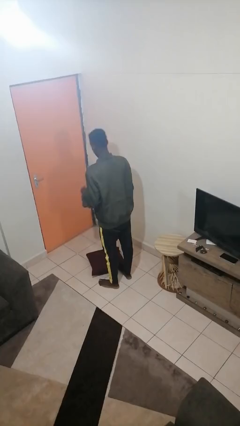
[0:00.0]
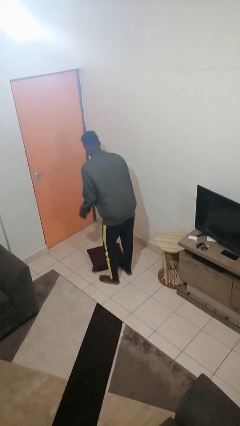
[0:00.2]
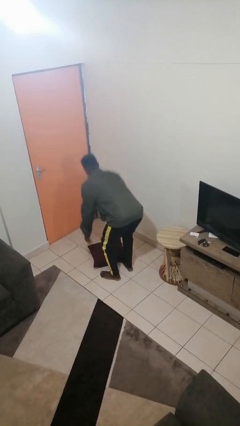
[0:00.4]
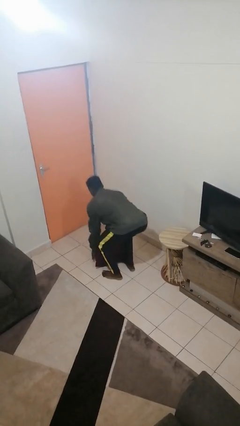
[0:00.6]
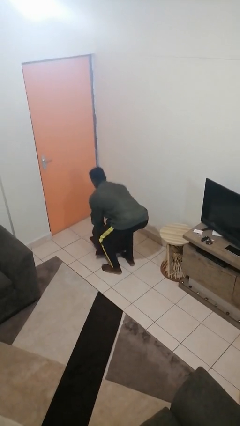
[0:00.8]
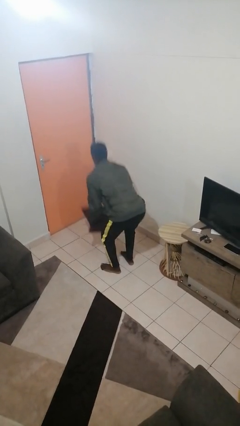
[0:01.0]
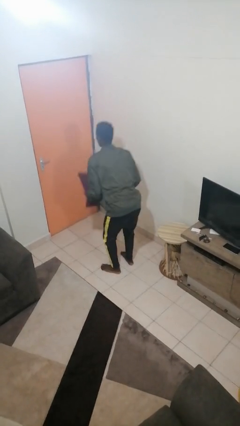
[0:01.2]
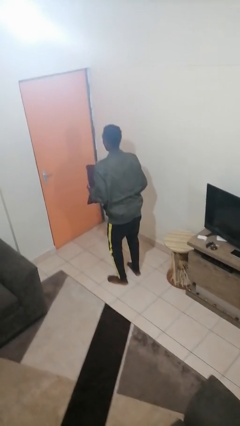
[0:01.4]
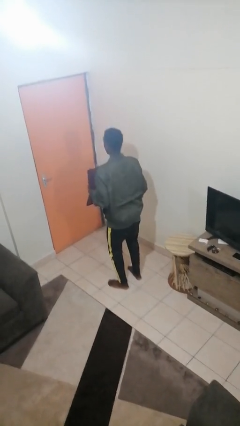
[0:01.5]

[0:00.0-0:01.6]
person picks up object from floor

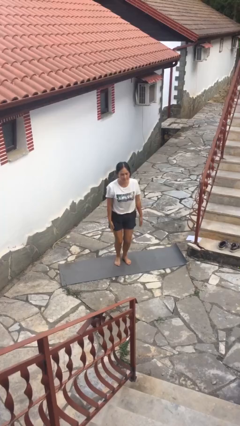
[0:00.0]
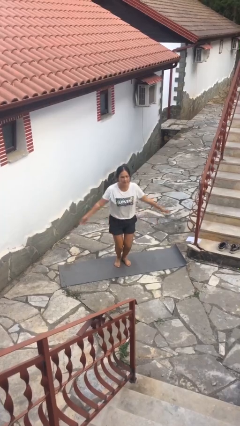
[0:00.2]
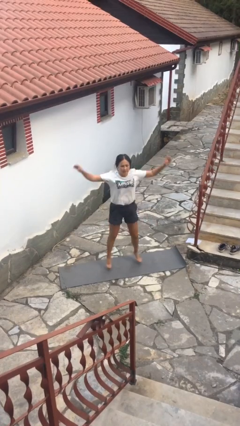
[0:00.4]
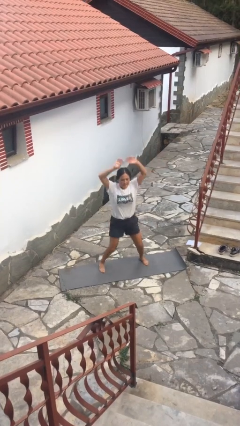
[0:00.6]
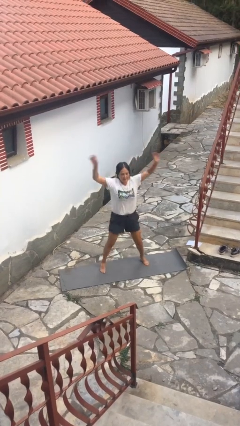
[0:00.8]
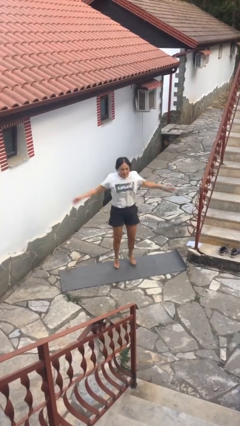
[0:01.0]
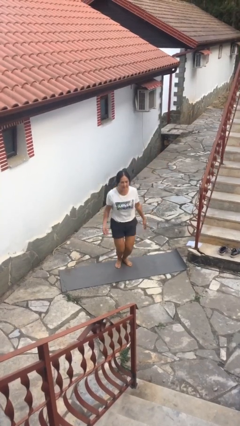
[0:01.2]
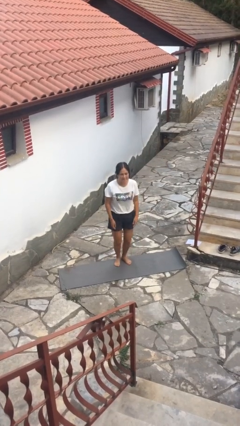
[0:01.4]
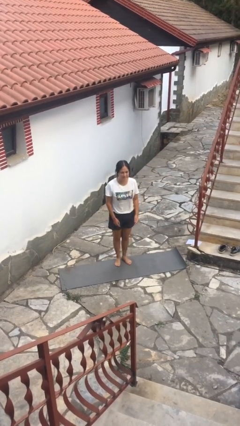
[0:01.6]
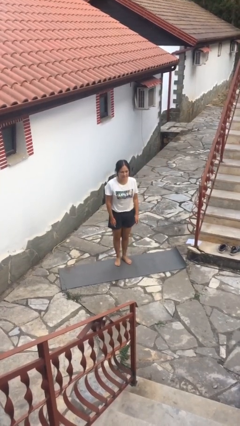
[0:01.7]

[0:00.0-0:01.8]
person exercises with jumping jacks

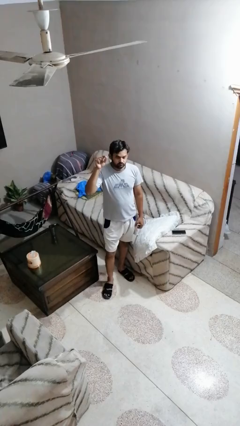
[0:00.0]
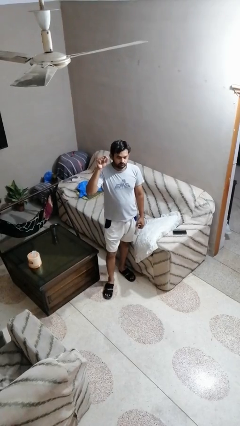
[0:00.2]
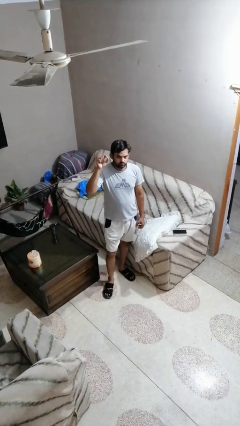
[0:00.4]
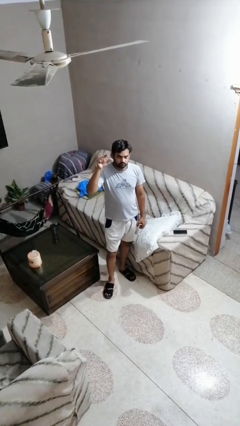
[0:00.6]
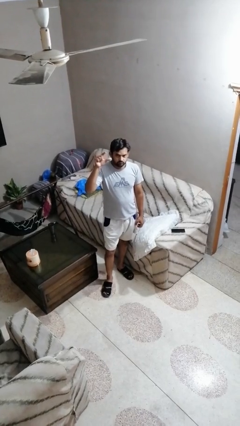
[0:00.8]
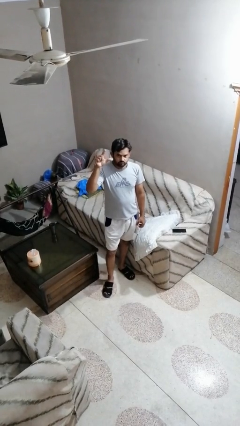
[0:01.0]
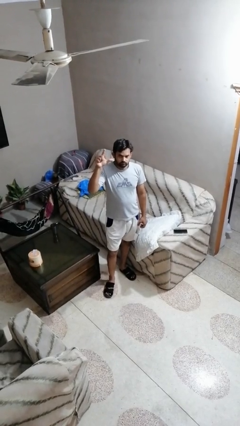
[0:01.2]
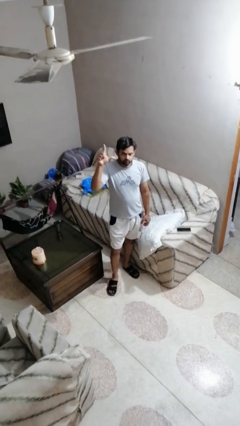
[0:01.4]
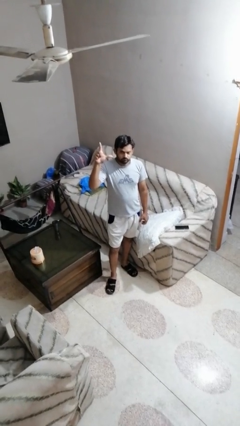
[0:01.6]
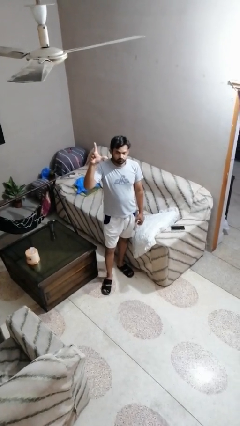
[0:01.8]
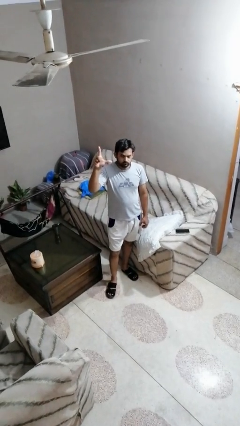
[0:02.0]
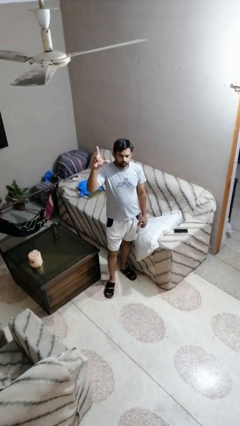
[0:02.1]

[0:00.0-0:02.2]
person gestures zoom out

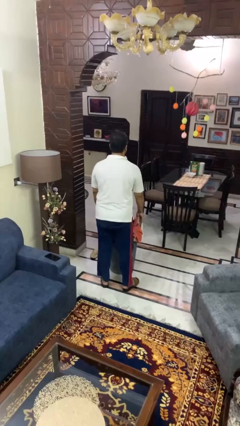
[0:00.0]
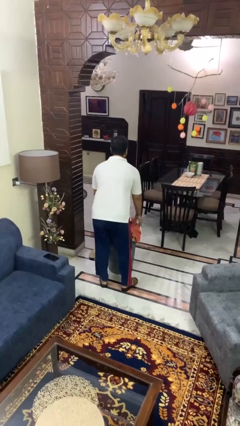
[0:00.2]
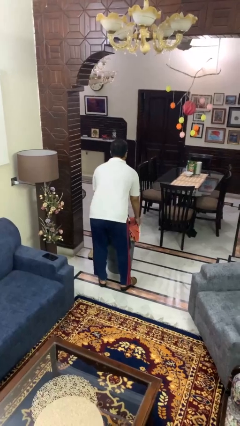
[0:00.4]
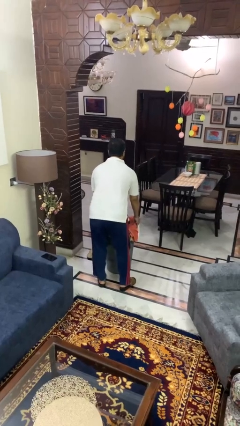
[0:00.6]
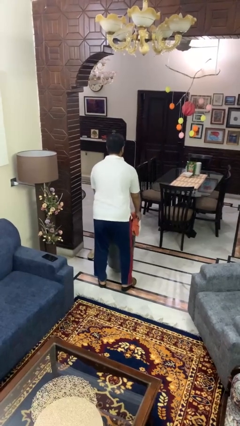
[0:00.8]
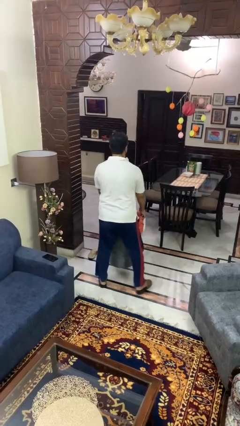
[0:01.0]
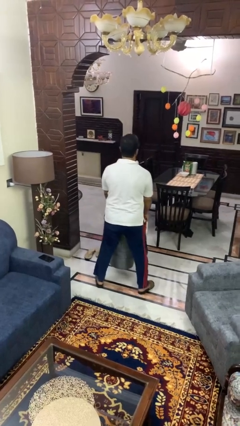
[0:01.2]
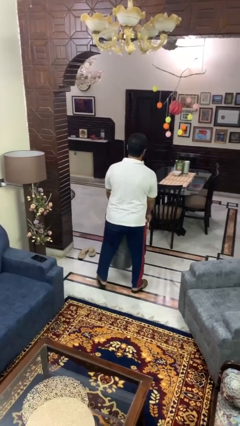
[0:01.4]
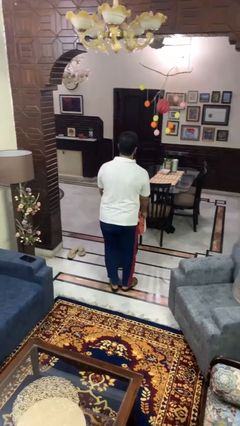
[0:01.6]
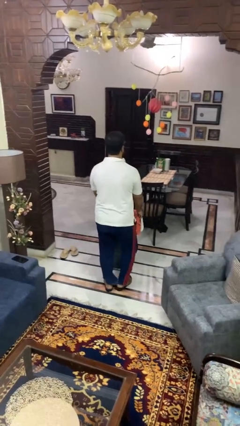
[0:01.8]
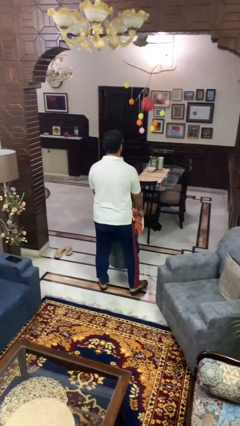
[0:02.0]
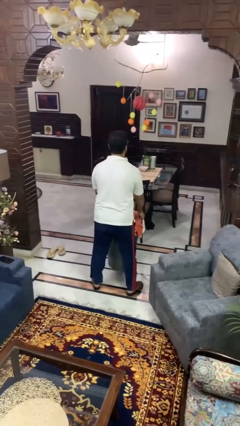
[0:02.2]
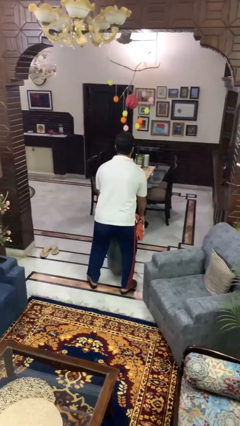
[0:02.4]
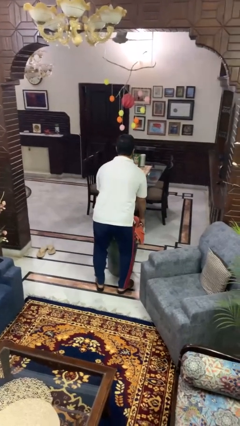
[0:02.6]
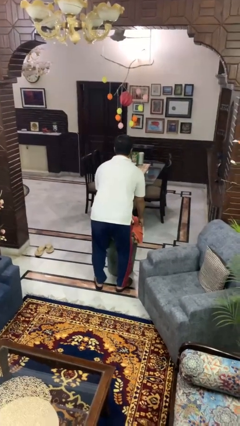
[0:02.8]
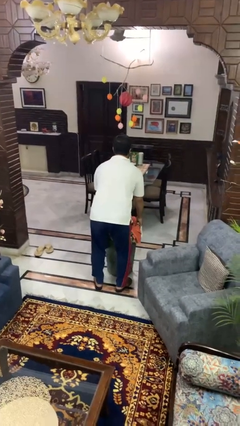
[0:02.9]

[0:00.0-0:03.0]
person carries laundry basket

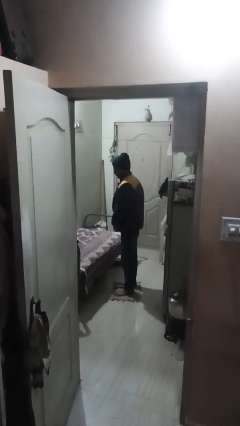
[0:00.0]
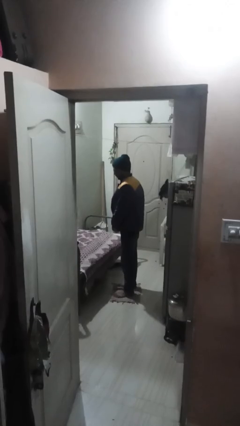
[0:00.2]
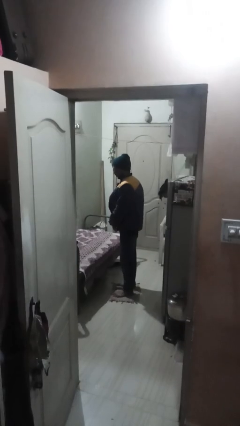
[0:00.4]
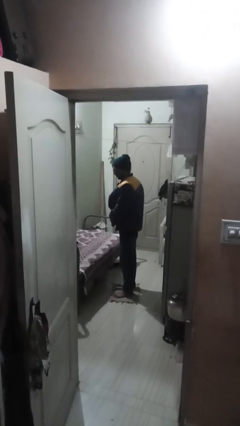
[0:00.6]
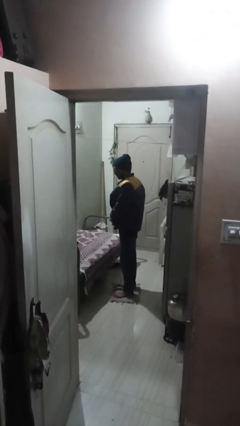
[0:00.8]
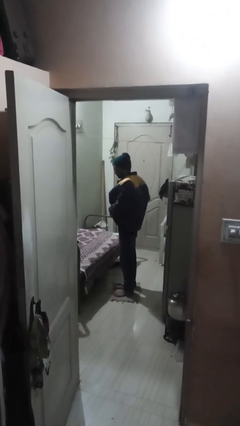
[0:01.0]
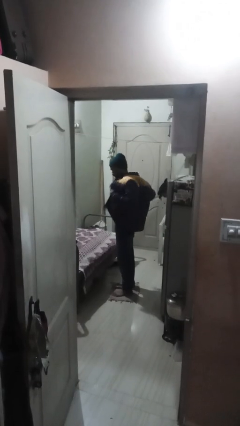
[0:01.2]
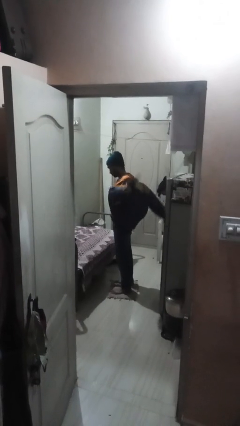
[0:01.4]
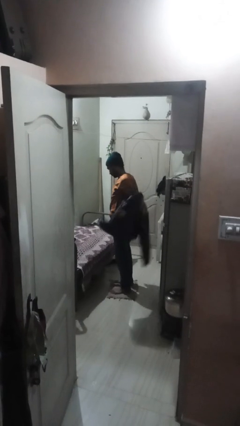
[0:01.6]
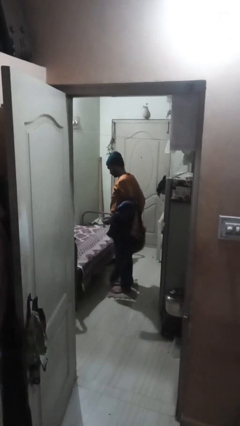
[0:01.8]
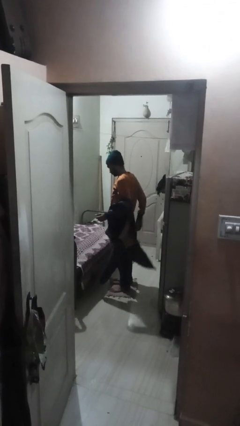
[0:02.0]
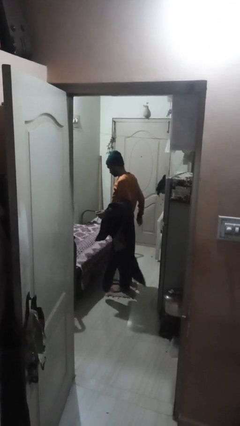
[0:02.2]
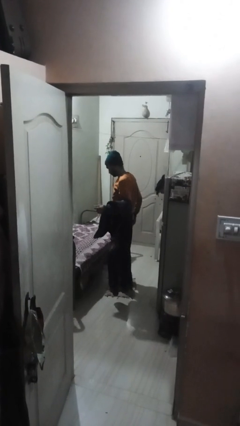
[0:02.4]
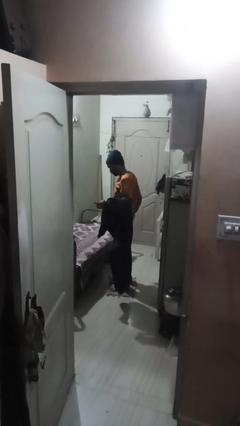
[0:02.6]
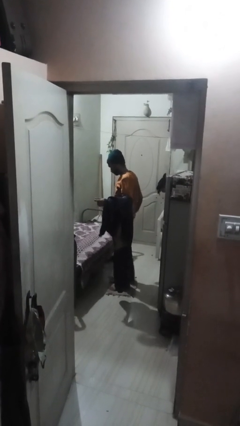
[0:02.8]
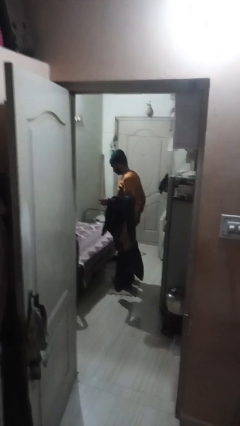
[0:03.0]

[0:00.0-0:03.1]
person takes off jacket

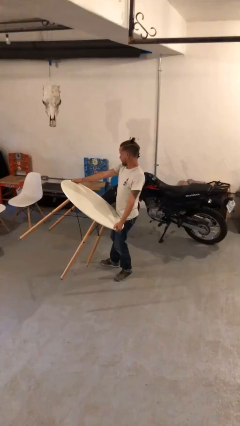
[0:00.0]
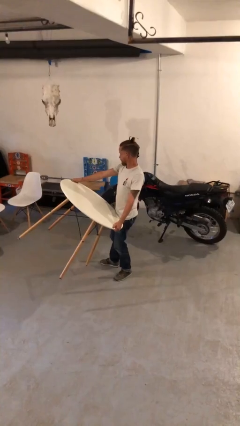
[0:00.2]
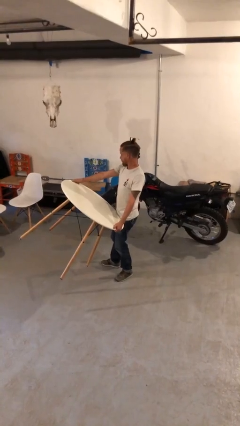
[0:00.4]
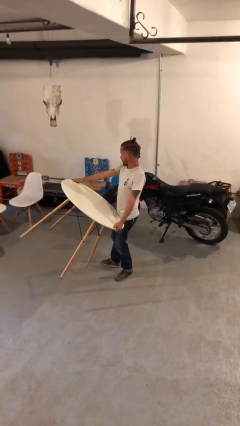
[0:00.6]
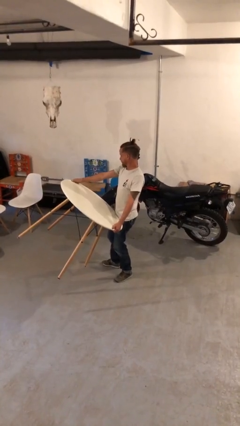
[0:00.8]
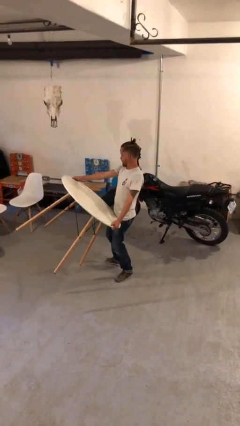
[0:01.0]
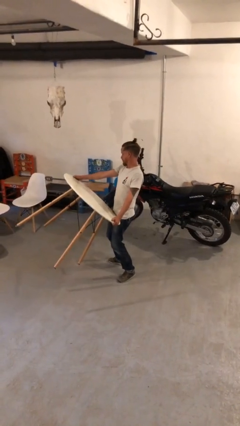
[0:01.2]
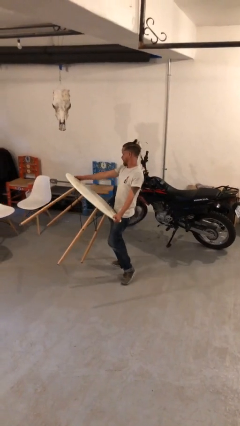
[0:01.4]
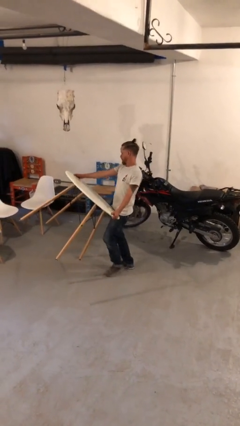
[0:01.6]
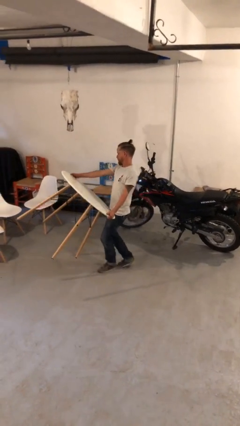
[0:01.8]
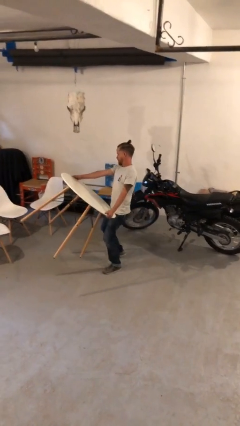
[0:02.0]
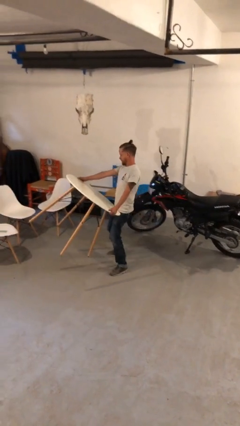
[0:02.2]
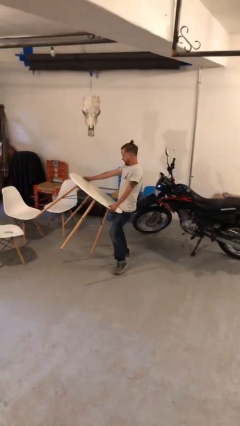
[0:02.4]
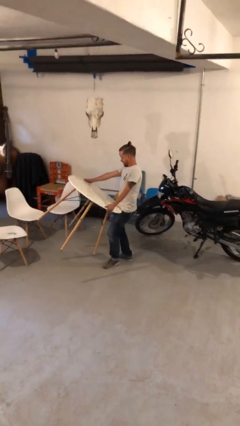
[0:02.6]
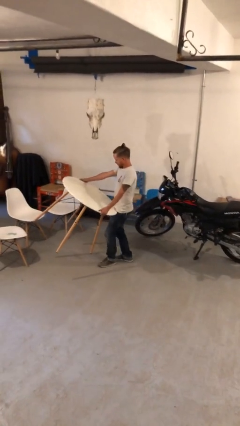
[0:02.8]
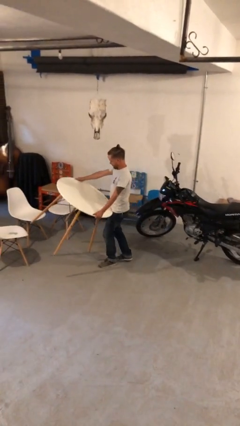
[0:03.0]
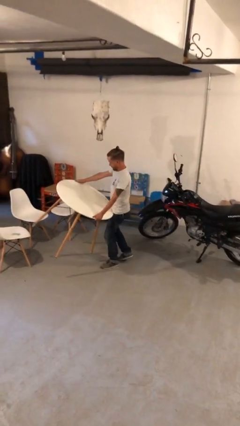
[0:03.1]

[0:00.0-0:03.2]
person carries heavy object

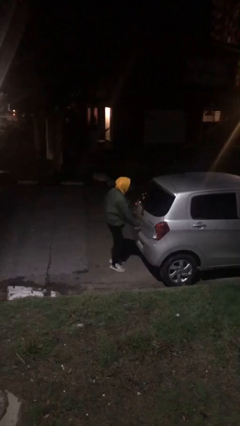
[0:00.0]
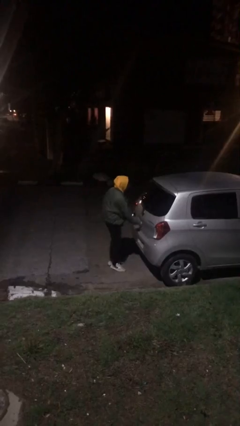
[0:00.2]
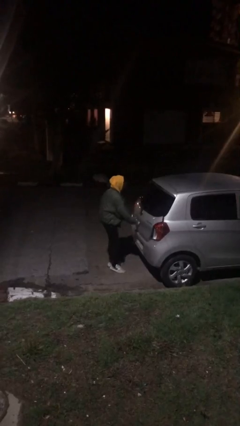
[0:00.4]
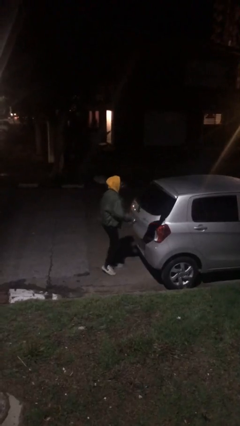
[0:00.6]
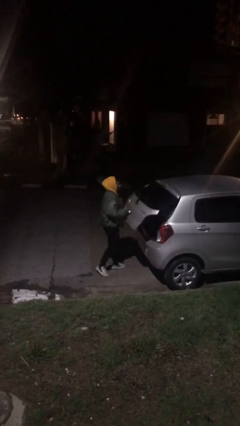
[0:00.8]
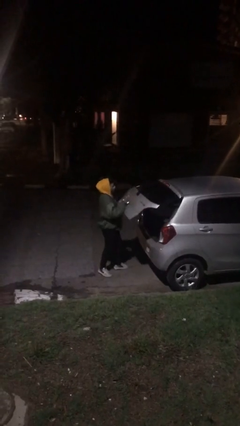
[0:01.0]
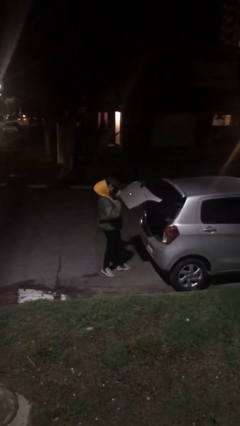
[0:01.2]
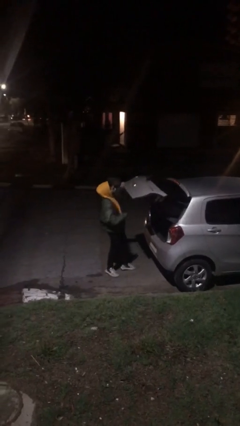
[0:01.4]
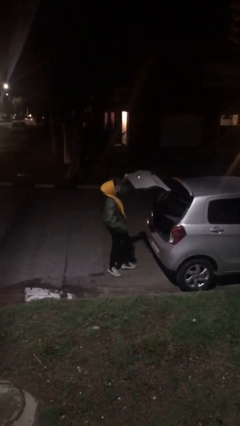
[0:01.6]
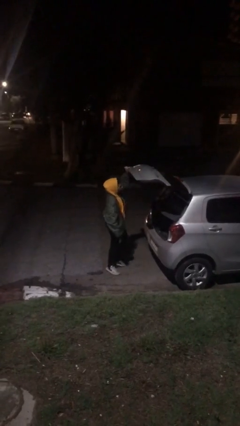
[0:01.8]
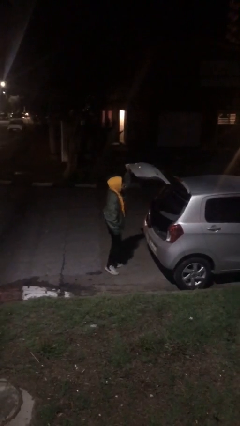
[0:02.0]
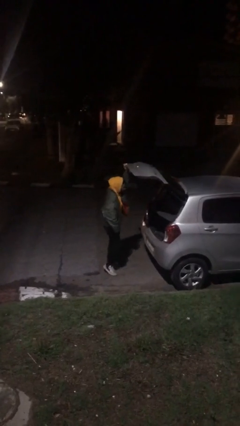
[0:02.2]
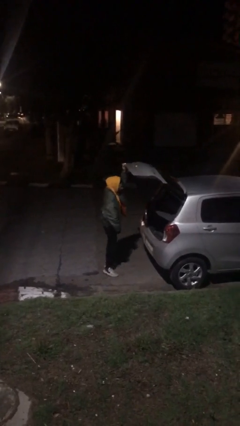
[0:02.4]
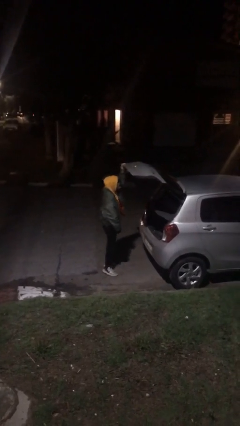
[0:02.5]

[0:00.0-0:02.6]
person opens car trunk
